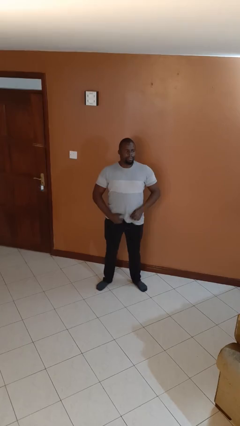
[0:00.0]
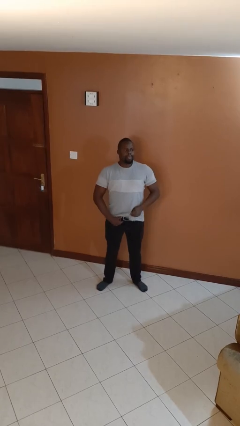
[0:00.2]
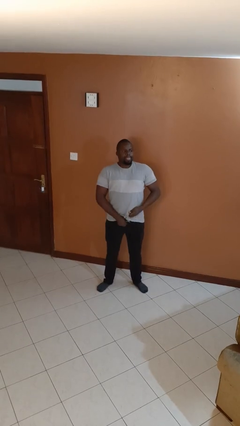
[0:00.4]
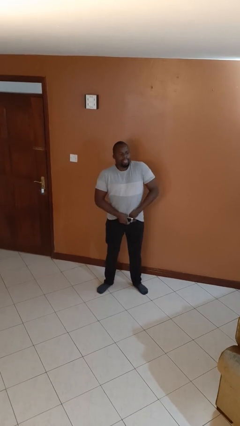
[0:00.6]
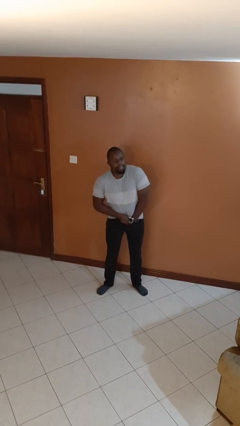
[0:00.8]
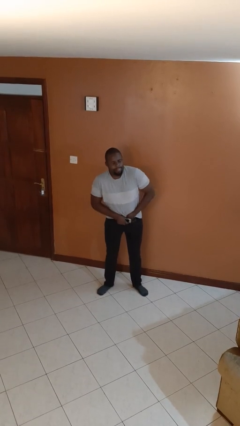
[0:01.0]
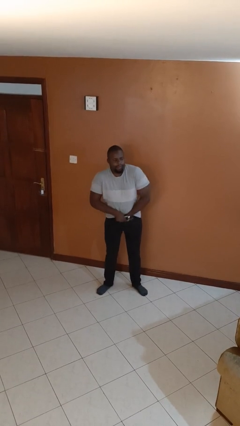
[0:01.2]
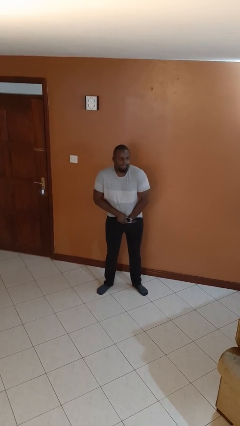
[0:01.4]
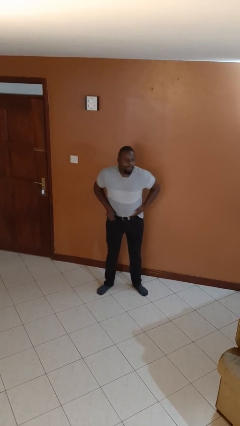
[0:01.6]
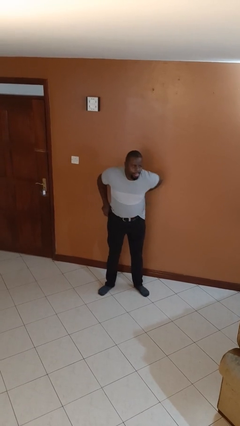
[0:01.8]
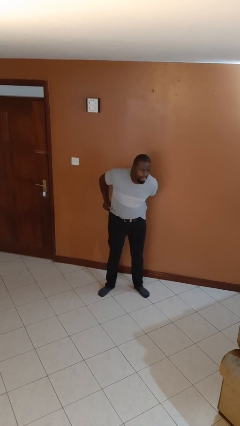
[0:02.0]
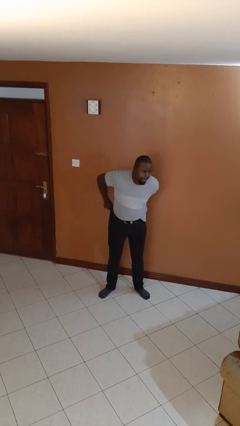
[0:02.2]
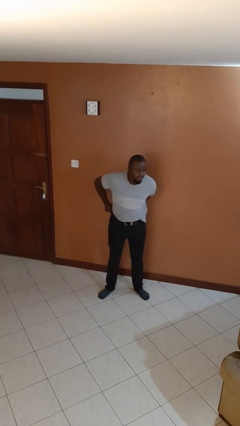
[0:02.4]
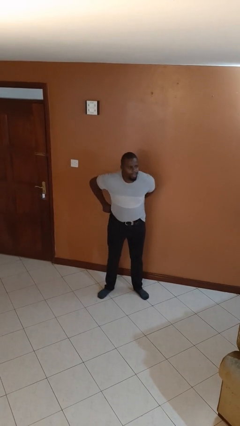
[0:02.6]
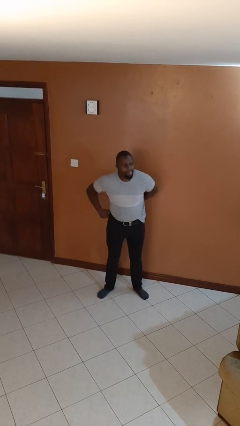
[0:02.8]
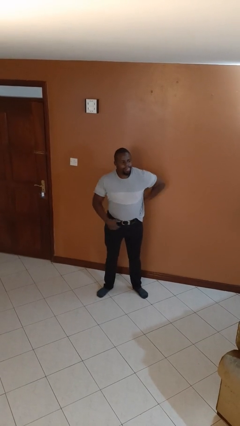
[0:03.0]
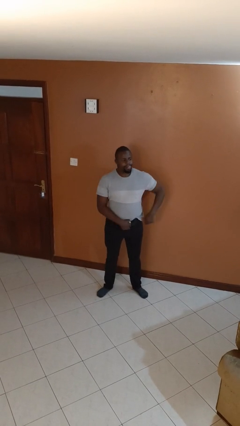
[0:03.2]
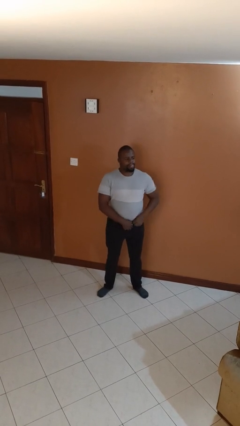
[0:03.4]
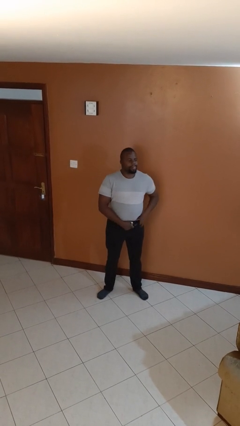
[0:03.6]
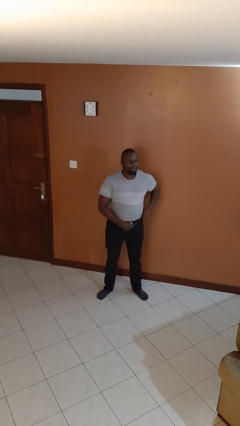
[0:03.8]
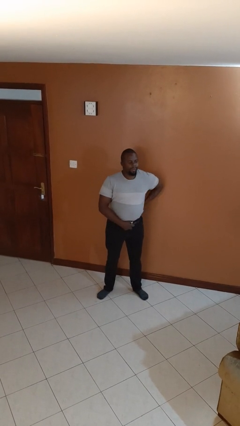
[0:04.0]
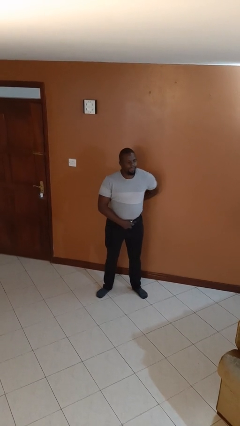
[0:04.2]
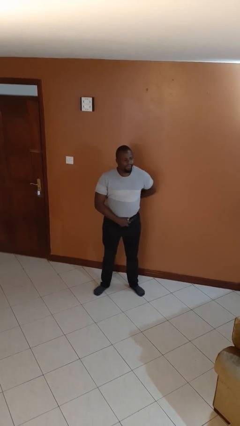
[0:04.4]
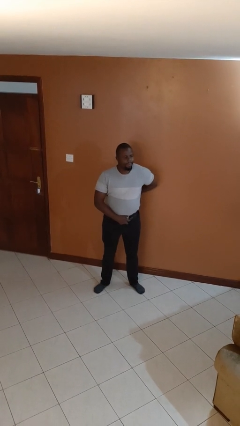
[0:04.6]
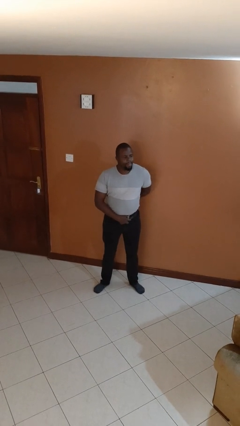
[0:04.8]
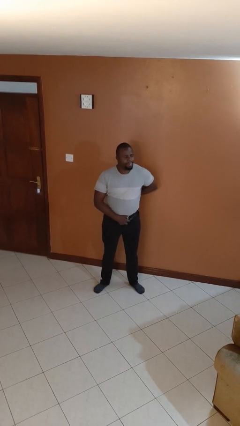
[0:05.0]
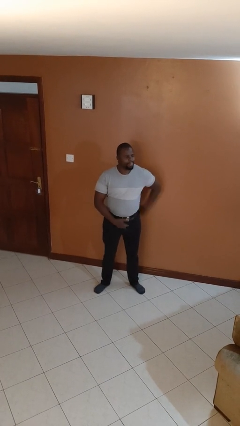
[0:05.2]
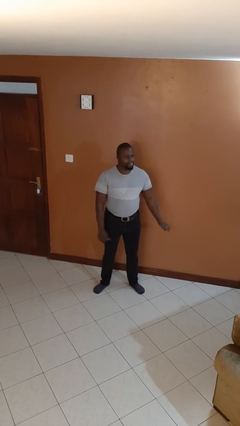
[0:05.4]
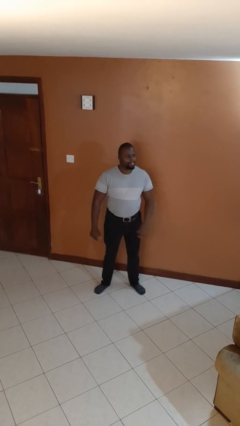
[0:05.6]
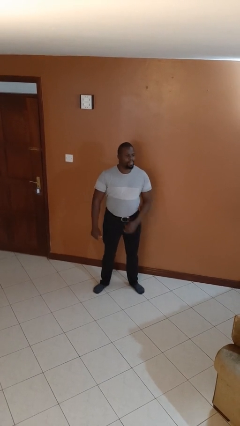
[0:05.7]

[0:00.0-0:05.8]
person tucks in shirt

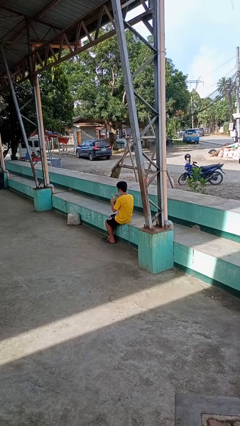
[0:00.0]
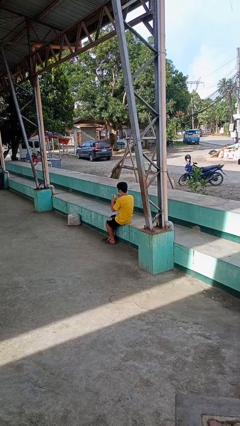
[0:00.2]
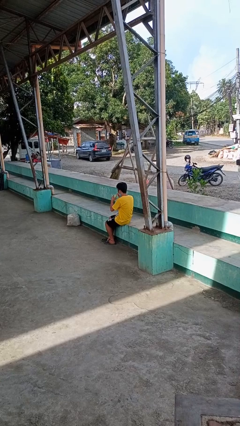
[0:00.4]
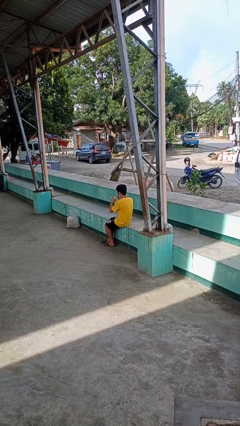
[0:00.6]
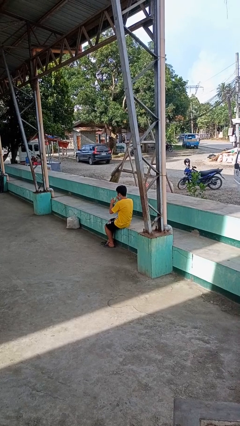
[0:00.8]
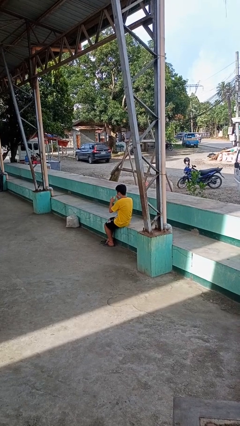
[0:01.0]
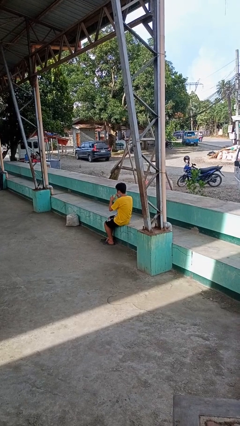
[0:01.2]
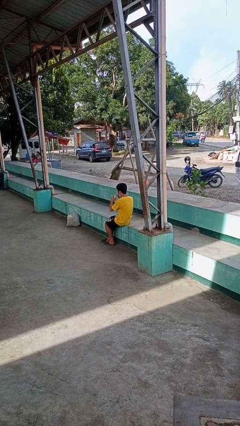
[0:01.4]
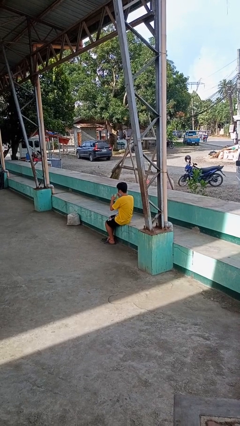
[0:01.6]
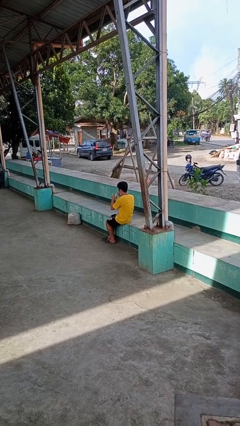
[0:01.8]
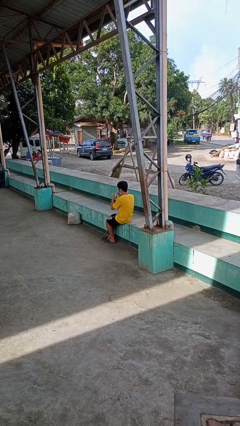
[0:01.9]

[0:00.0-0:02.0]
person drinks from straw

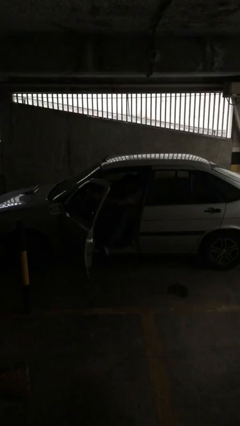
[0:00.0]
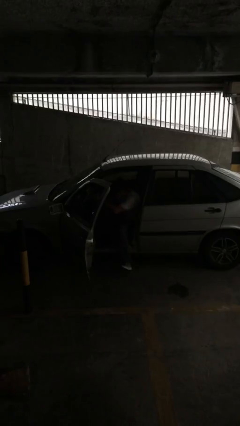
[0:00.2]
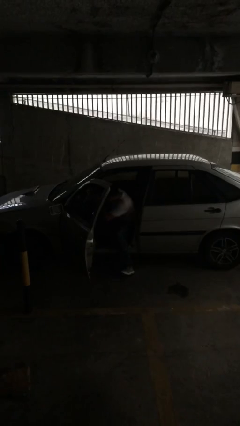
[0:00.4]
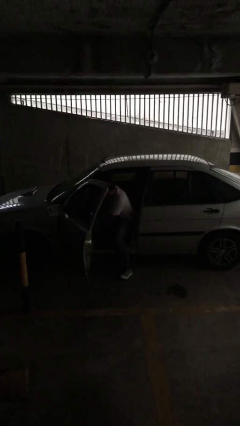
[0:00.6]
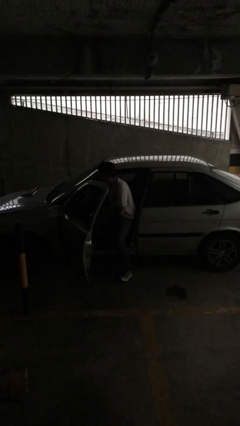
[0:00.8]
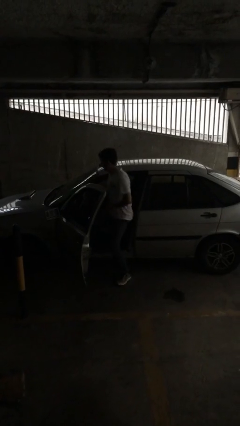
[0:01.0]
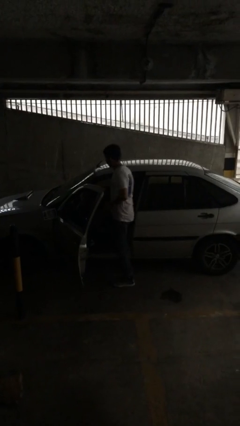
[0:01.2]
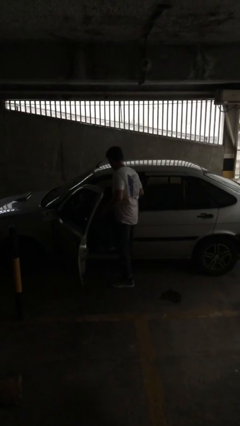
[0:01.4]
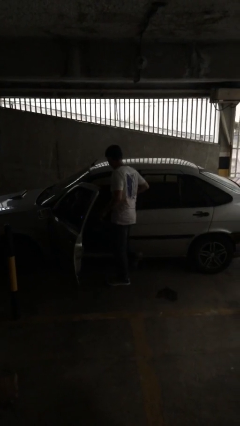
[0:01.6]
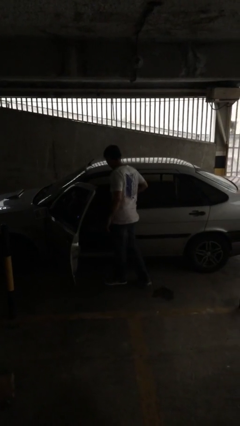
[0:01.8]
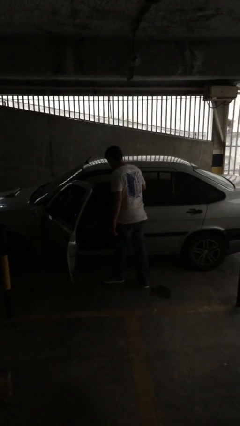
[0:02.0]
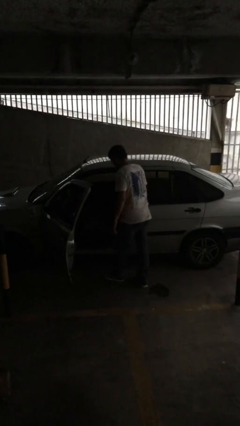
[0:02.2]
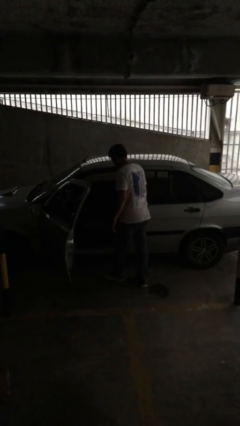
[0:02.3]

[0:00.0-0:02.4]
person exits car

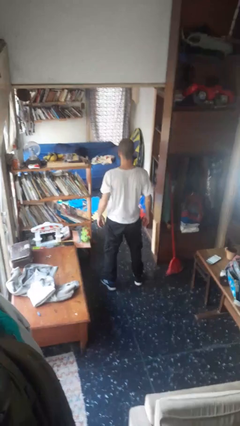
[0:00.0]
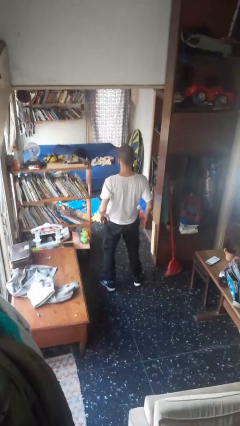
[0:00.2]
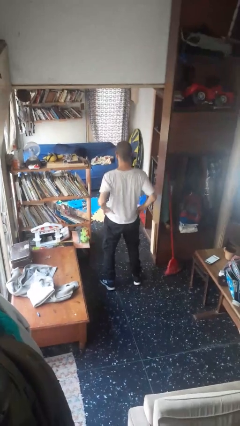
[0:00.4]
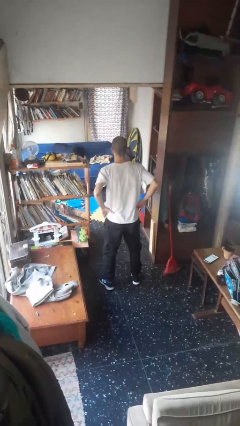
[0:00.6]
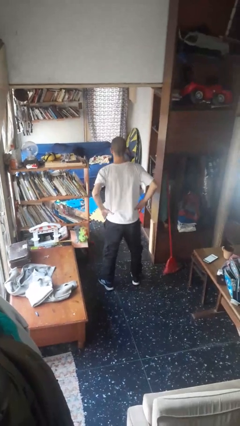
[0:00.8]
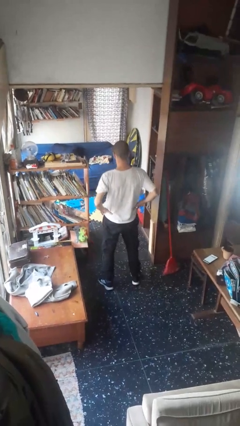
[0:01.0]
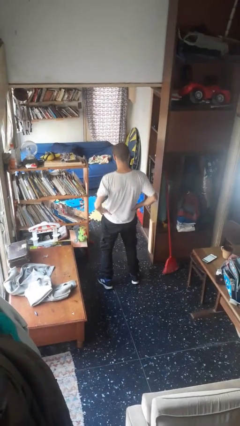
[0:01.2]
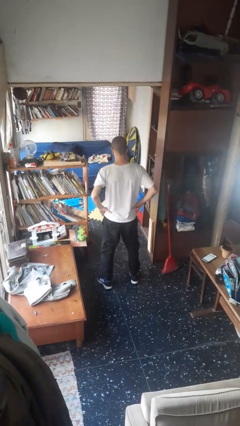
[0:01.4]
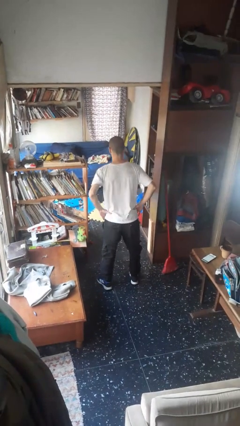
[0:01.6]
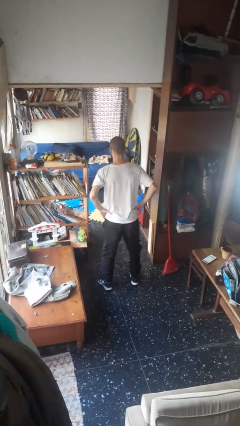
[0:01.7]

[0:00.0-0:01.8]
person wiggles hips

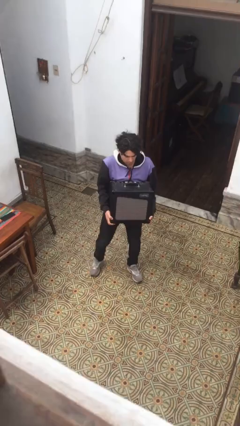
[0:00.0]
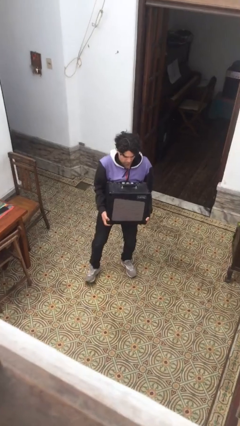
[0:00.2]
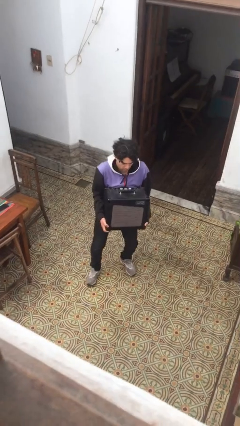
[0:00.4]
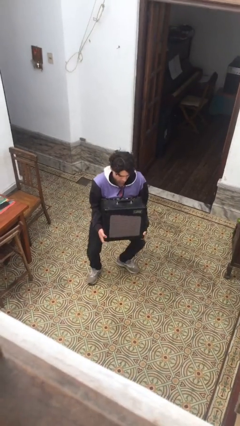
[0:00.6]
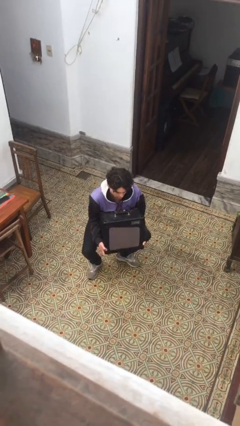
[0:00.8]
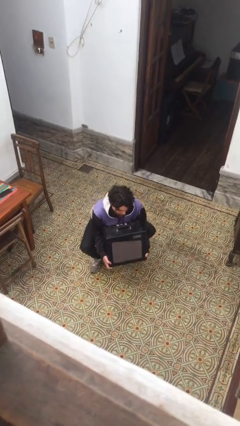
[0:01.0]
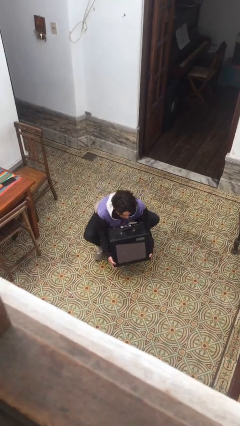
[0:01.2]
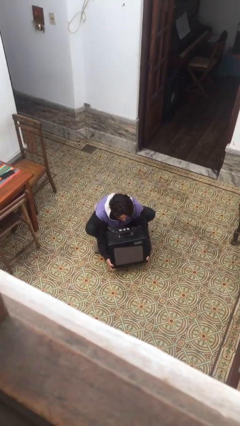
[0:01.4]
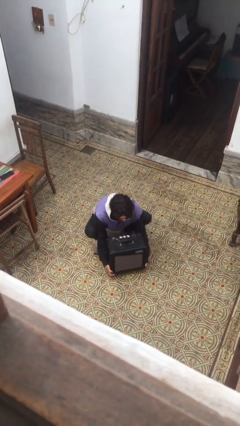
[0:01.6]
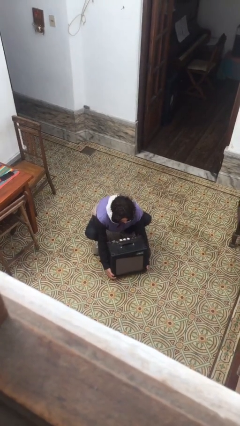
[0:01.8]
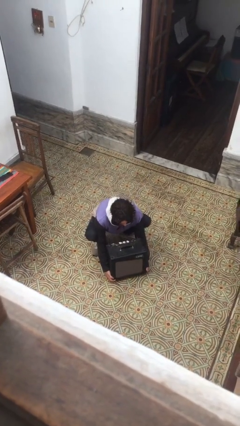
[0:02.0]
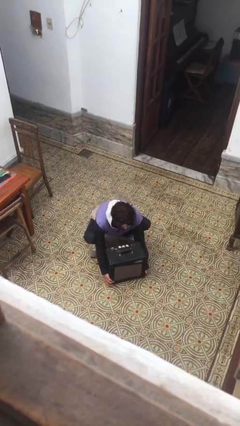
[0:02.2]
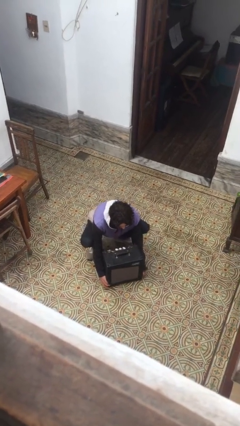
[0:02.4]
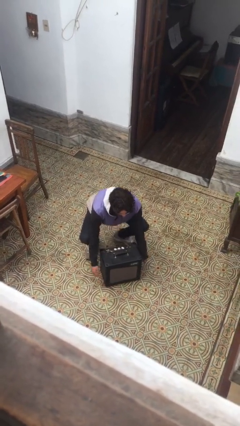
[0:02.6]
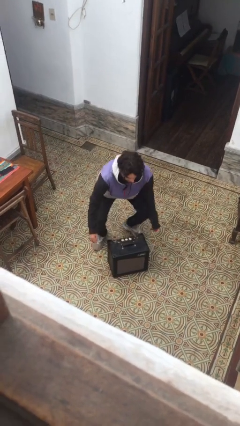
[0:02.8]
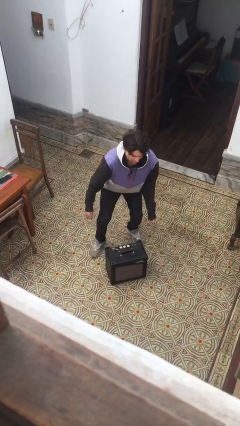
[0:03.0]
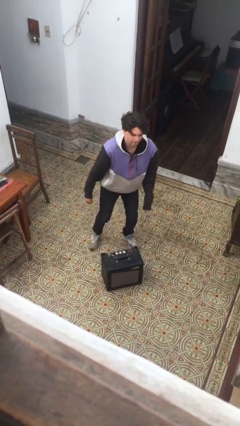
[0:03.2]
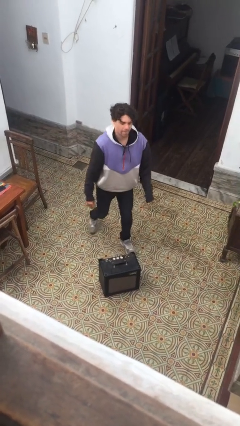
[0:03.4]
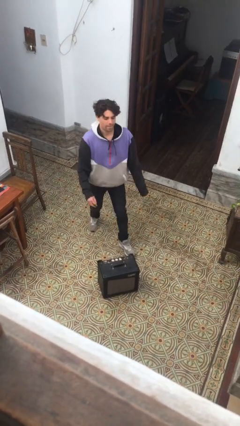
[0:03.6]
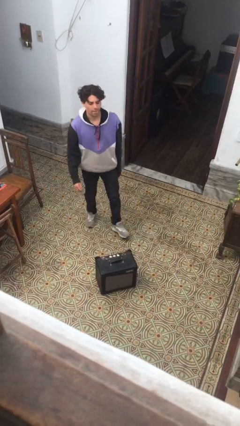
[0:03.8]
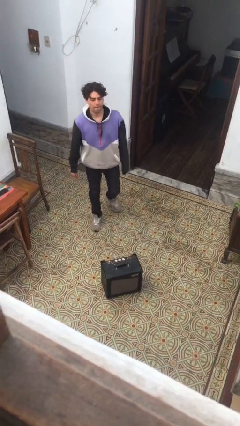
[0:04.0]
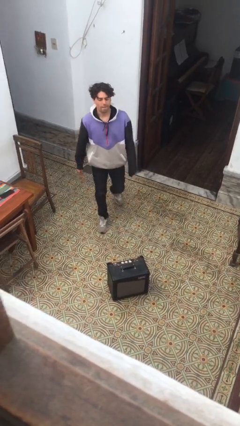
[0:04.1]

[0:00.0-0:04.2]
person puts down object on floor

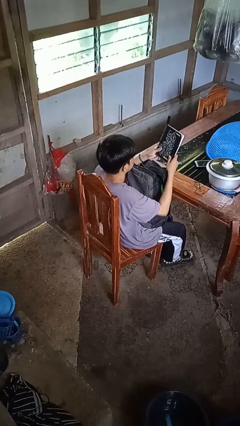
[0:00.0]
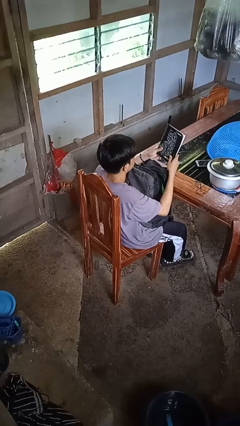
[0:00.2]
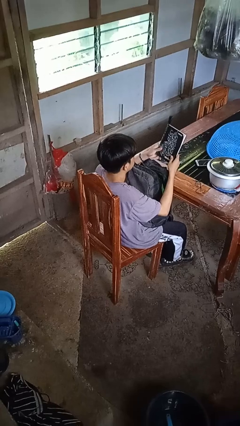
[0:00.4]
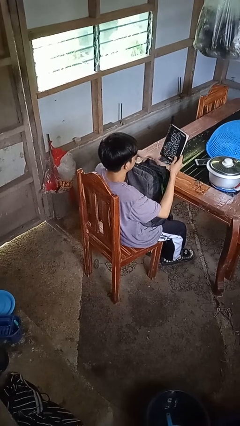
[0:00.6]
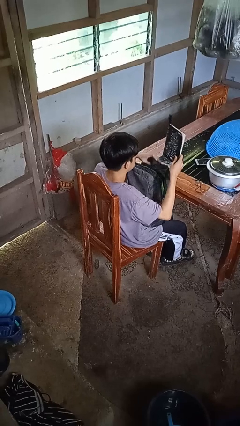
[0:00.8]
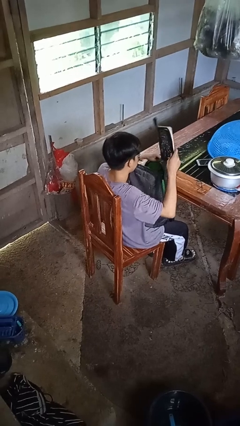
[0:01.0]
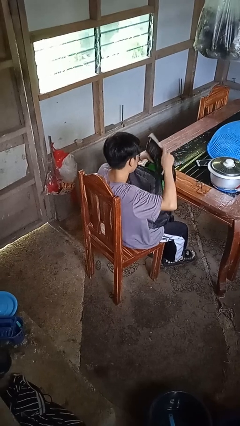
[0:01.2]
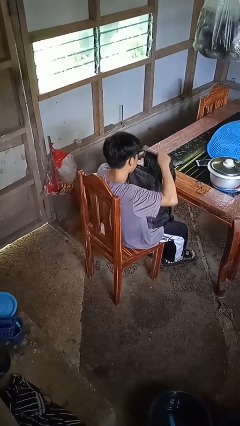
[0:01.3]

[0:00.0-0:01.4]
person puts object into backpack
